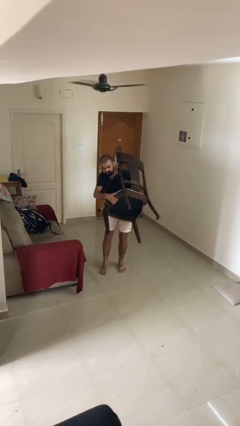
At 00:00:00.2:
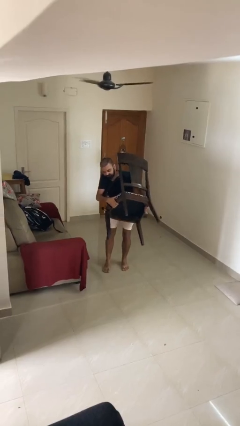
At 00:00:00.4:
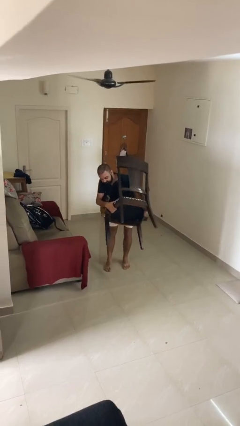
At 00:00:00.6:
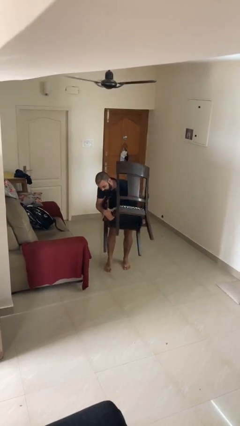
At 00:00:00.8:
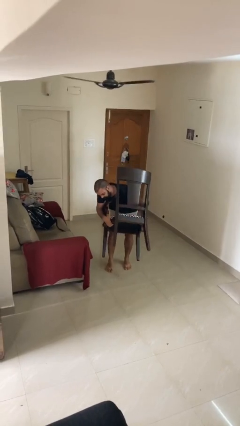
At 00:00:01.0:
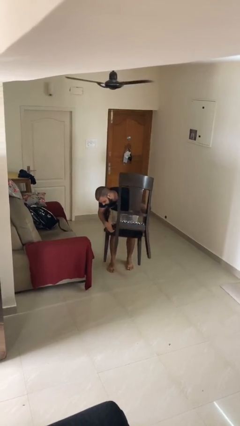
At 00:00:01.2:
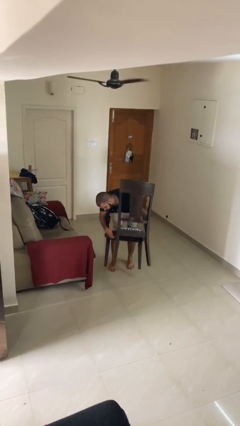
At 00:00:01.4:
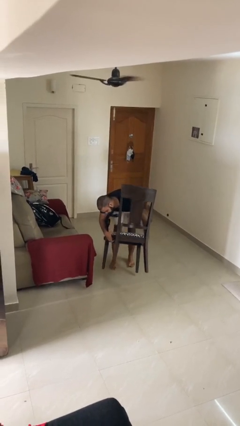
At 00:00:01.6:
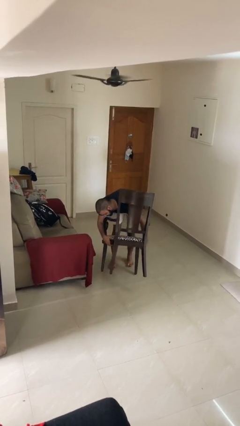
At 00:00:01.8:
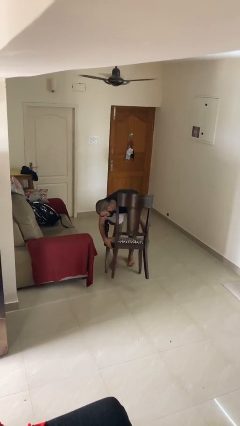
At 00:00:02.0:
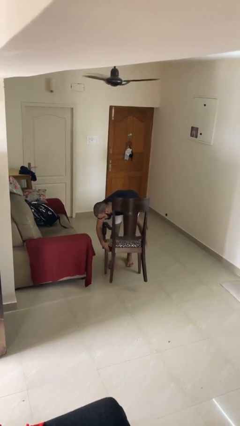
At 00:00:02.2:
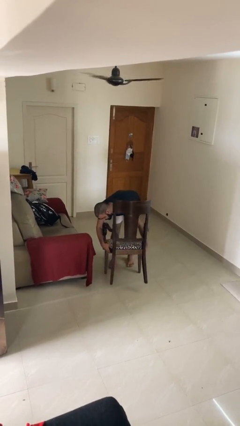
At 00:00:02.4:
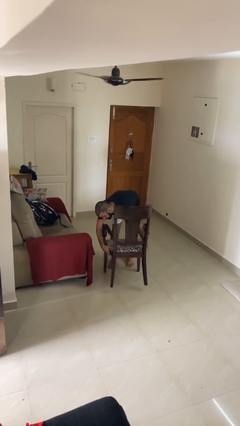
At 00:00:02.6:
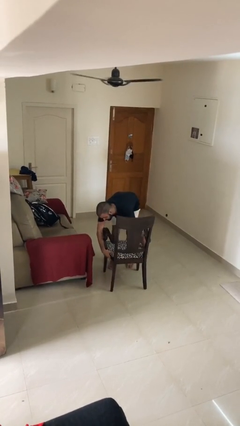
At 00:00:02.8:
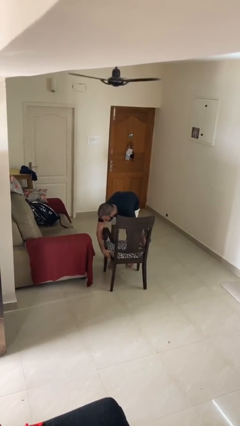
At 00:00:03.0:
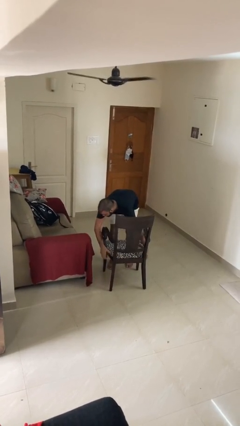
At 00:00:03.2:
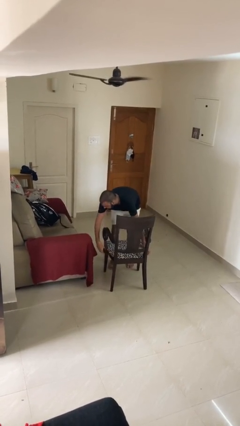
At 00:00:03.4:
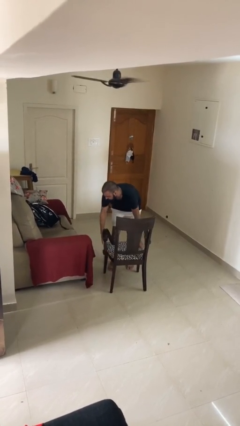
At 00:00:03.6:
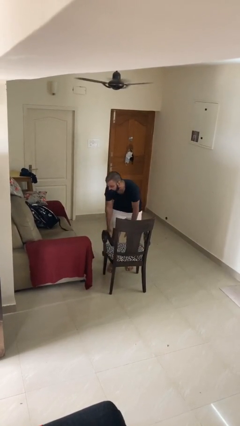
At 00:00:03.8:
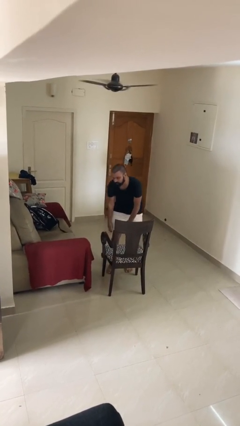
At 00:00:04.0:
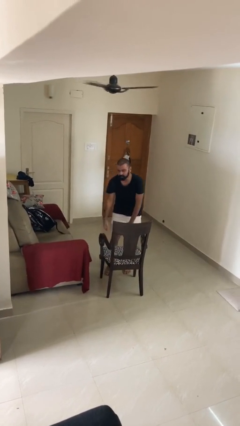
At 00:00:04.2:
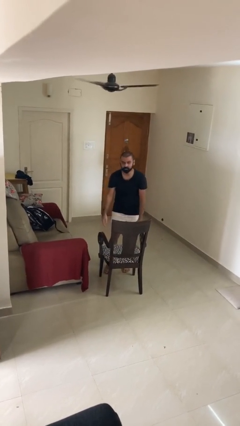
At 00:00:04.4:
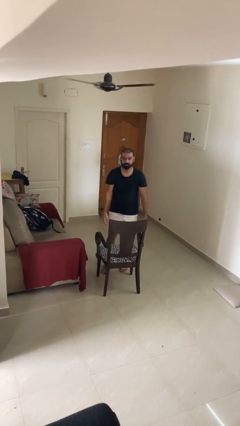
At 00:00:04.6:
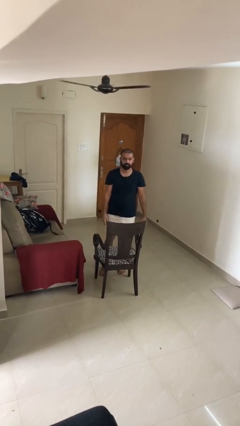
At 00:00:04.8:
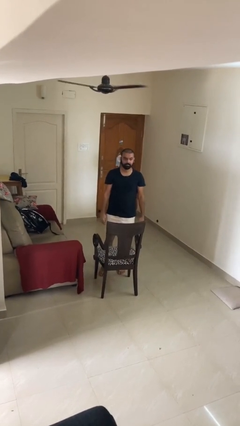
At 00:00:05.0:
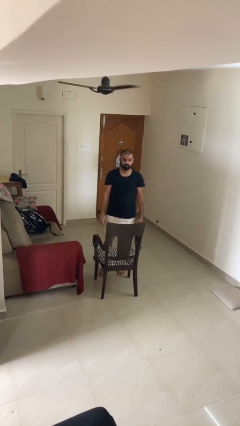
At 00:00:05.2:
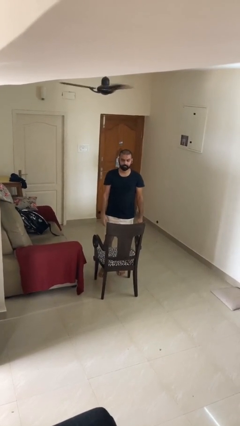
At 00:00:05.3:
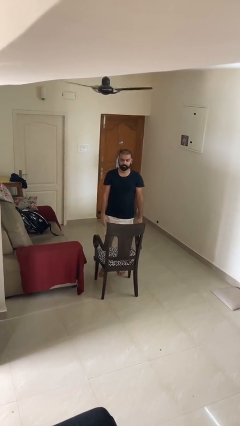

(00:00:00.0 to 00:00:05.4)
person puts down object on floor

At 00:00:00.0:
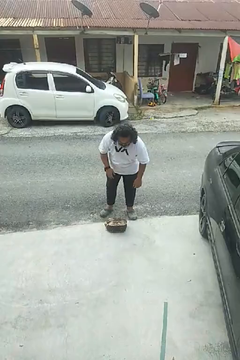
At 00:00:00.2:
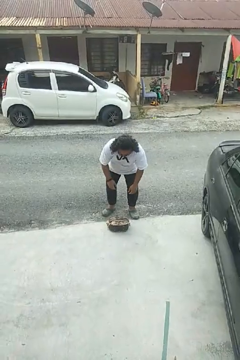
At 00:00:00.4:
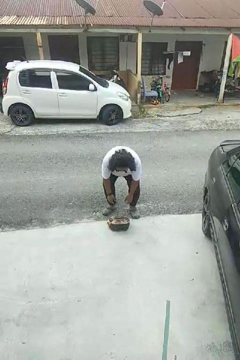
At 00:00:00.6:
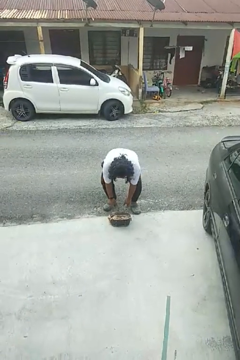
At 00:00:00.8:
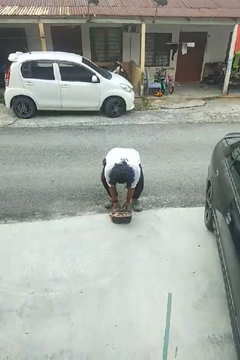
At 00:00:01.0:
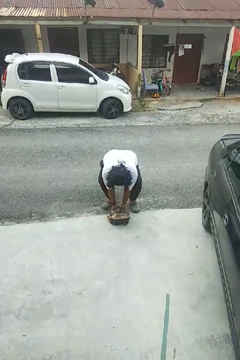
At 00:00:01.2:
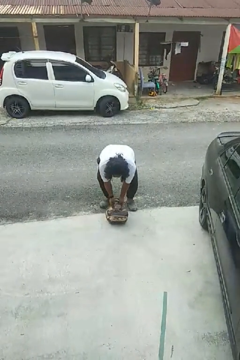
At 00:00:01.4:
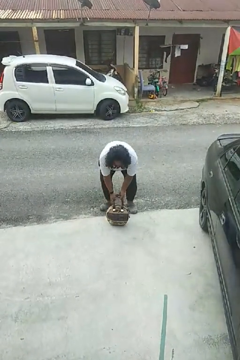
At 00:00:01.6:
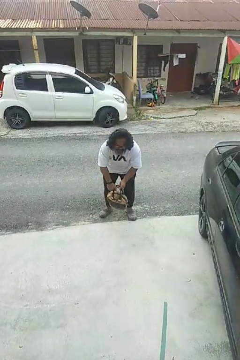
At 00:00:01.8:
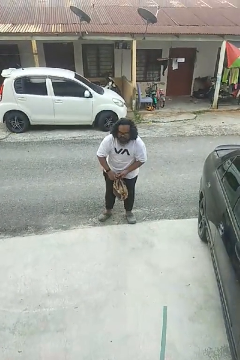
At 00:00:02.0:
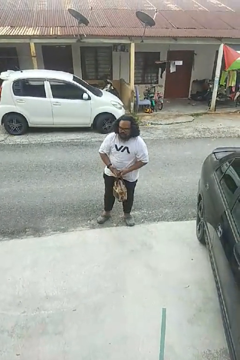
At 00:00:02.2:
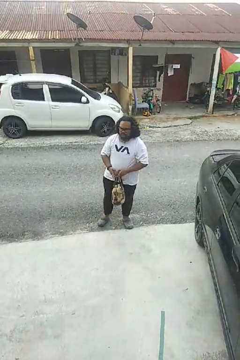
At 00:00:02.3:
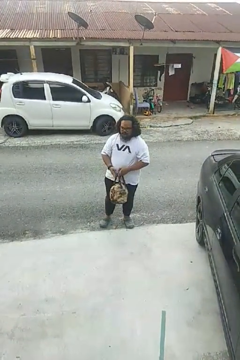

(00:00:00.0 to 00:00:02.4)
person picks up object from floor

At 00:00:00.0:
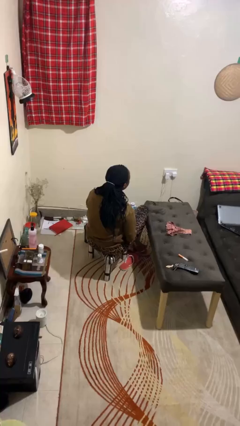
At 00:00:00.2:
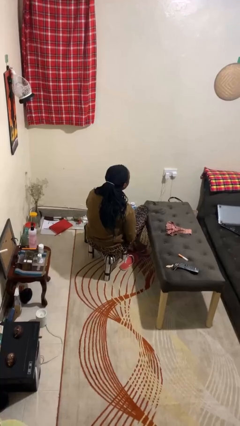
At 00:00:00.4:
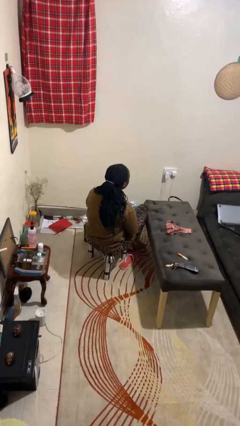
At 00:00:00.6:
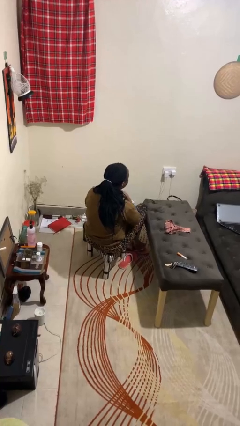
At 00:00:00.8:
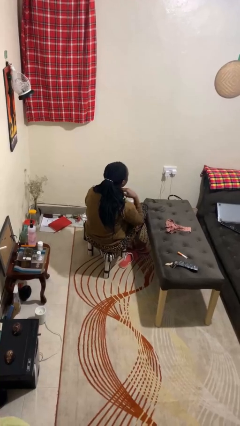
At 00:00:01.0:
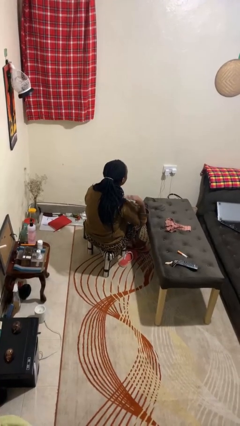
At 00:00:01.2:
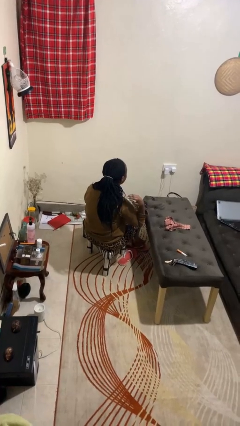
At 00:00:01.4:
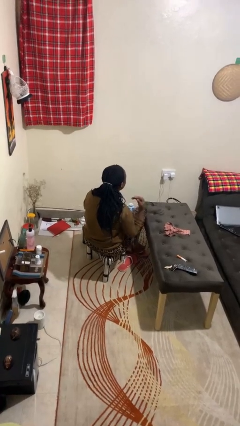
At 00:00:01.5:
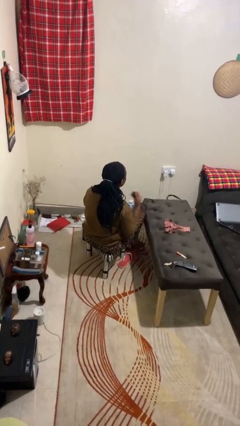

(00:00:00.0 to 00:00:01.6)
person gestures cut

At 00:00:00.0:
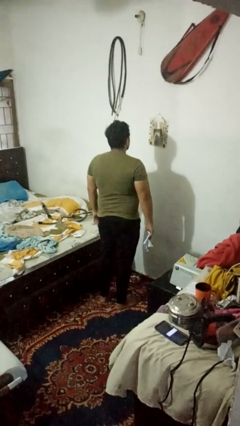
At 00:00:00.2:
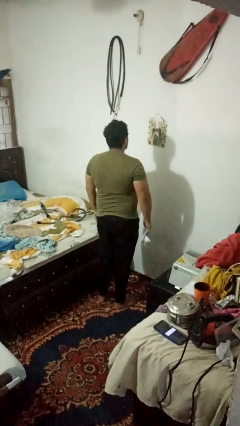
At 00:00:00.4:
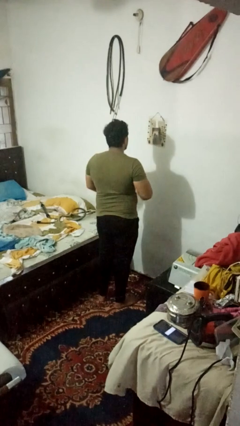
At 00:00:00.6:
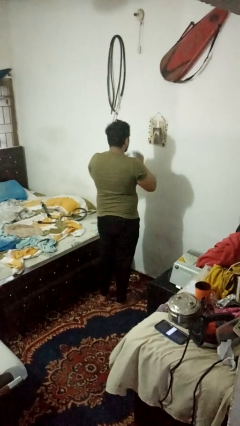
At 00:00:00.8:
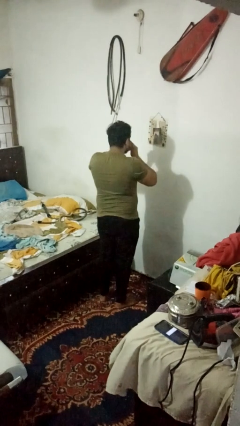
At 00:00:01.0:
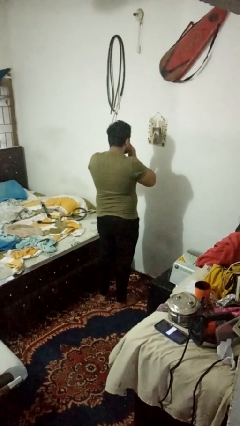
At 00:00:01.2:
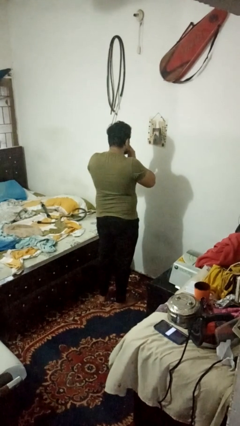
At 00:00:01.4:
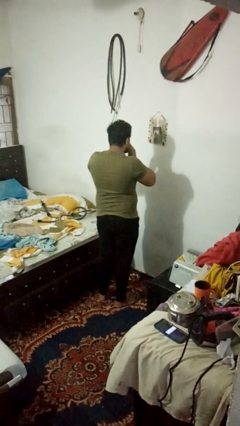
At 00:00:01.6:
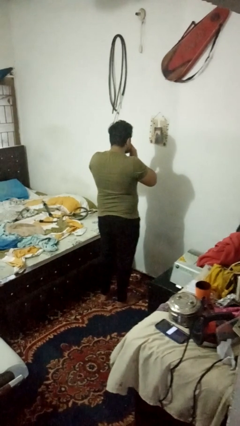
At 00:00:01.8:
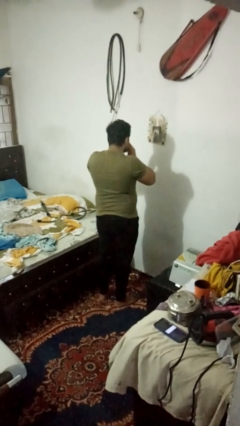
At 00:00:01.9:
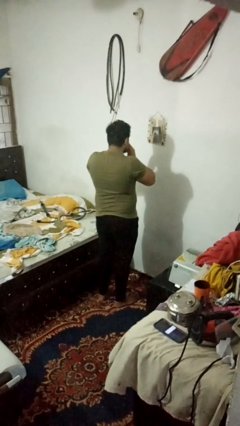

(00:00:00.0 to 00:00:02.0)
person blows nose

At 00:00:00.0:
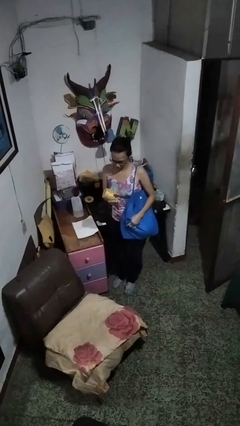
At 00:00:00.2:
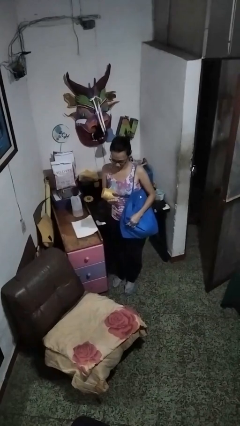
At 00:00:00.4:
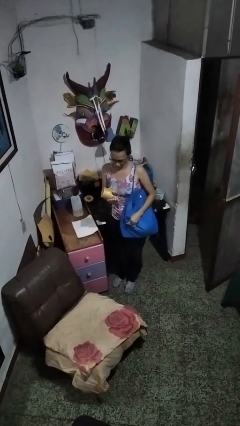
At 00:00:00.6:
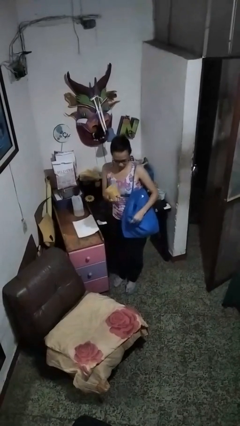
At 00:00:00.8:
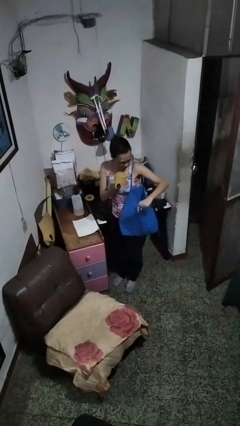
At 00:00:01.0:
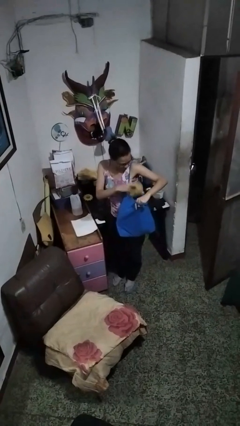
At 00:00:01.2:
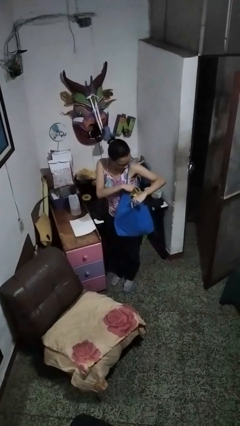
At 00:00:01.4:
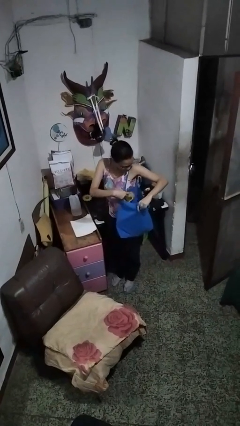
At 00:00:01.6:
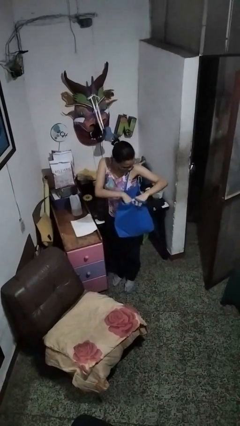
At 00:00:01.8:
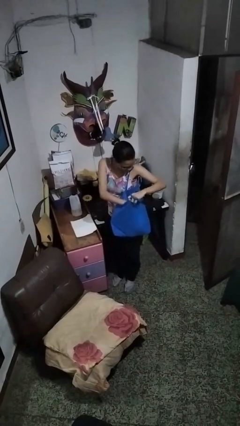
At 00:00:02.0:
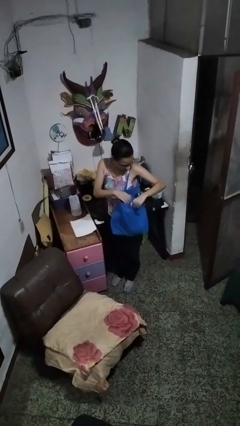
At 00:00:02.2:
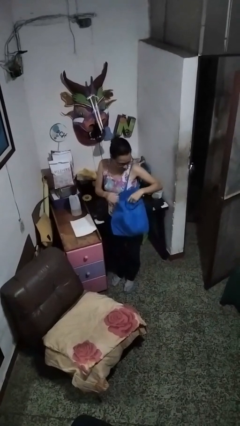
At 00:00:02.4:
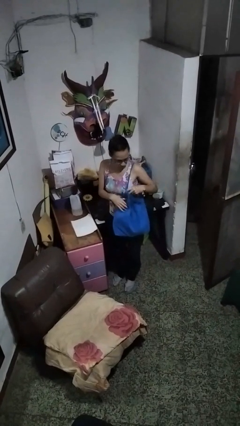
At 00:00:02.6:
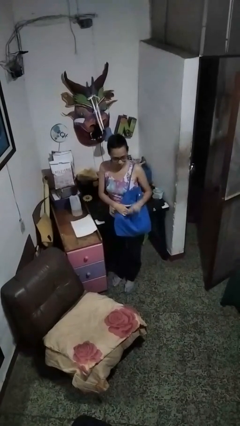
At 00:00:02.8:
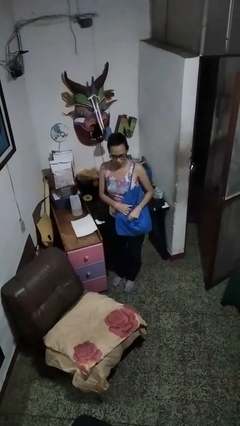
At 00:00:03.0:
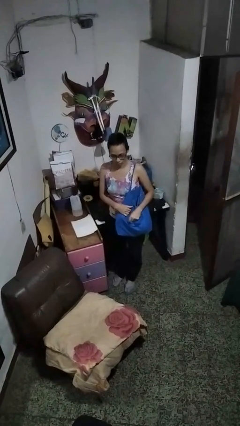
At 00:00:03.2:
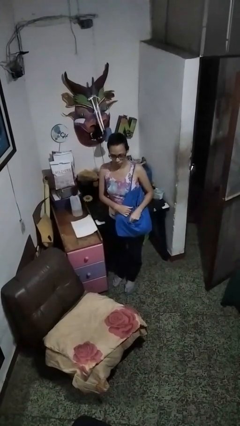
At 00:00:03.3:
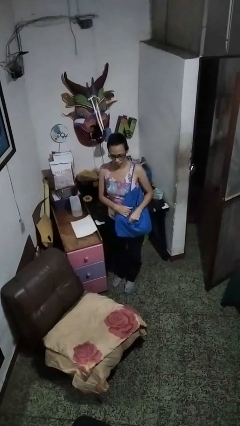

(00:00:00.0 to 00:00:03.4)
person puts object into bag

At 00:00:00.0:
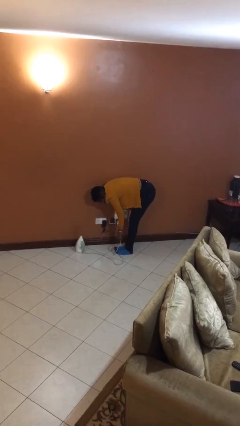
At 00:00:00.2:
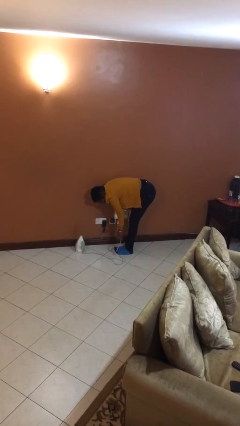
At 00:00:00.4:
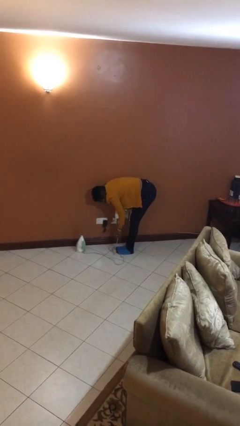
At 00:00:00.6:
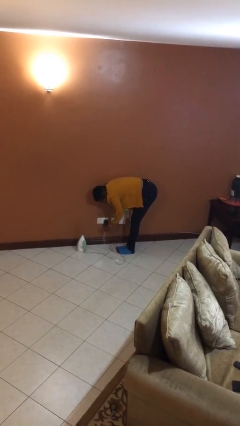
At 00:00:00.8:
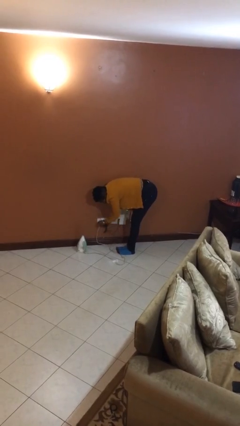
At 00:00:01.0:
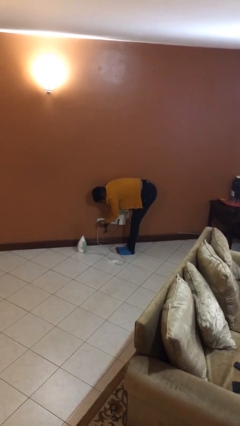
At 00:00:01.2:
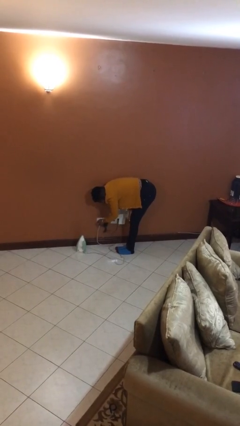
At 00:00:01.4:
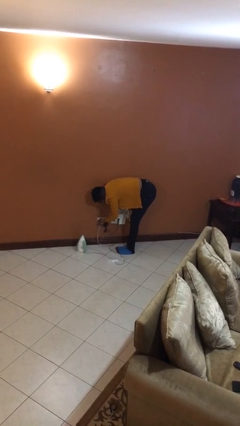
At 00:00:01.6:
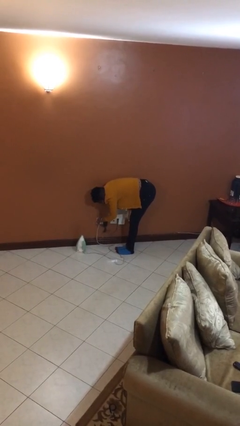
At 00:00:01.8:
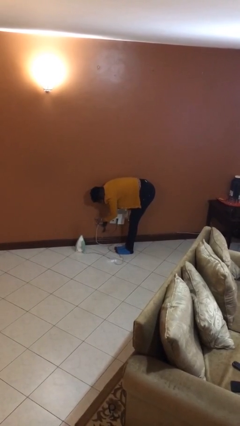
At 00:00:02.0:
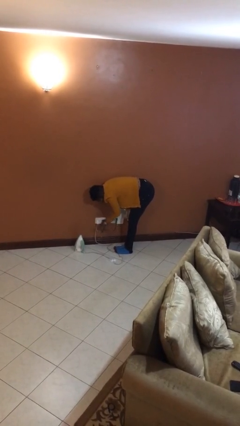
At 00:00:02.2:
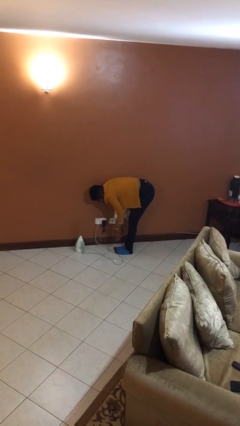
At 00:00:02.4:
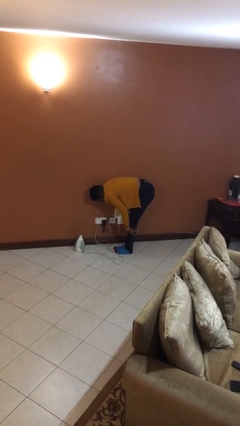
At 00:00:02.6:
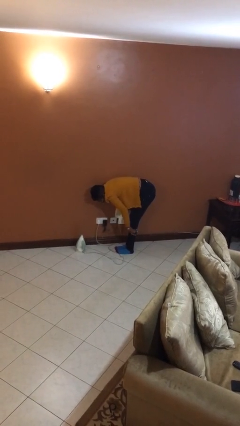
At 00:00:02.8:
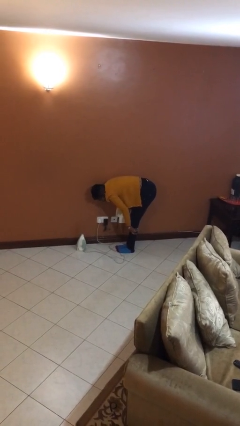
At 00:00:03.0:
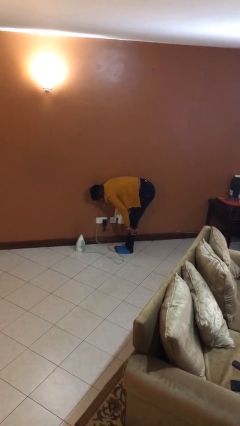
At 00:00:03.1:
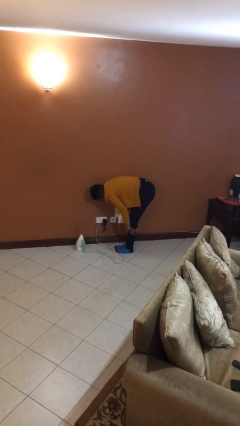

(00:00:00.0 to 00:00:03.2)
person plugs into electrical socket
